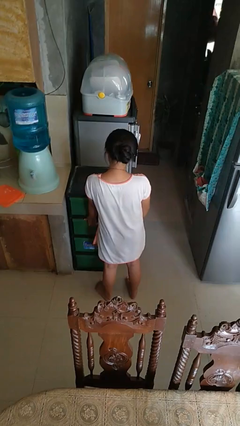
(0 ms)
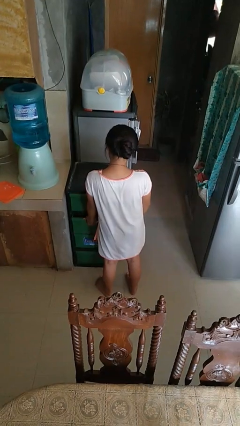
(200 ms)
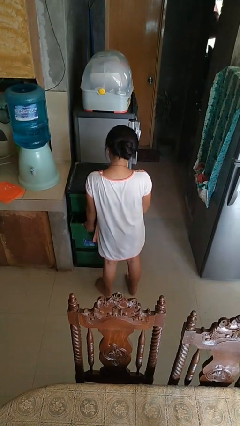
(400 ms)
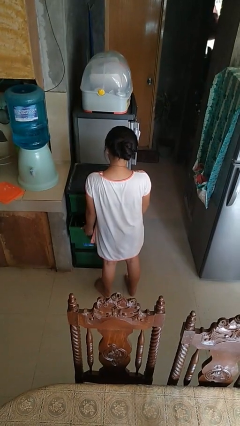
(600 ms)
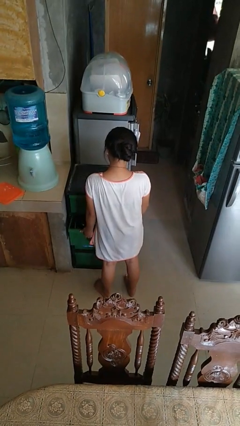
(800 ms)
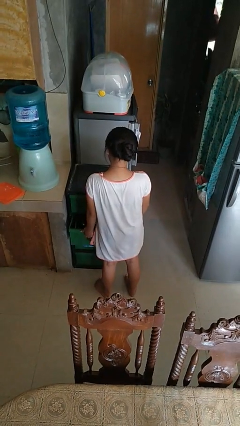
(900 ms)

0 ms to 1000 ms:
person opens kitchen drawer

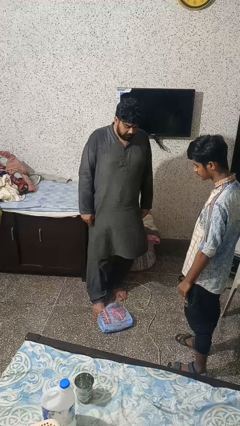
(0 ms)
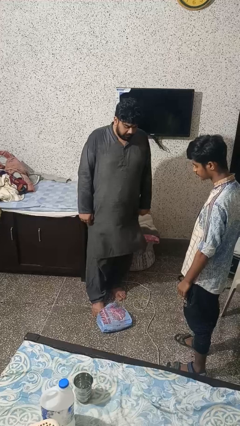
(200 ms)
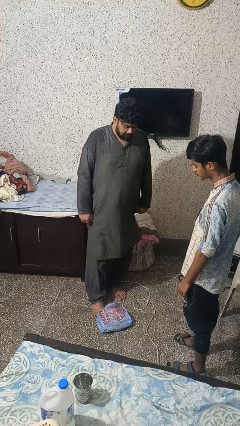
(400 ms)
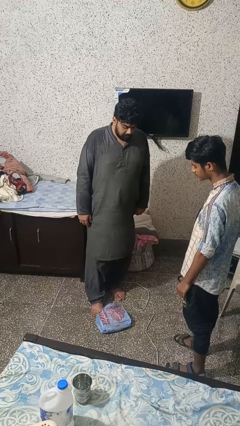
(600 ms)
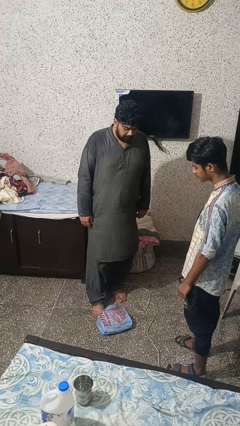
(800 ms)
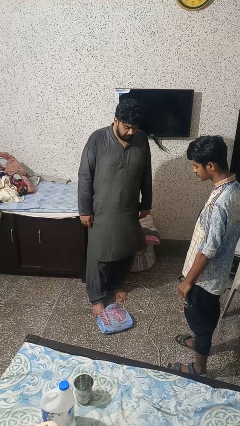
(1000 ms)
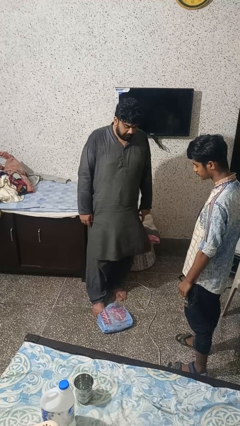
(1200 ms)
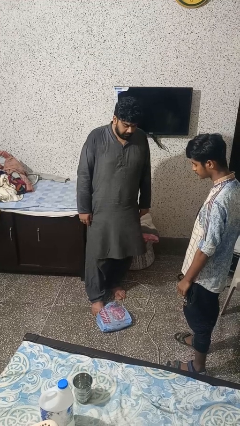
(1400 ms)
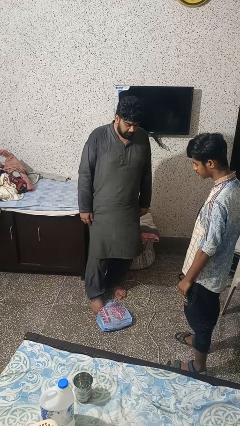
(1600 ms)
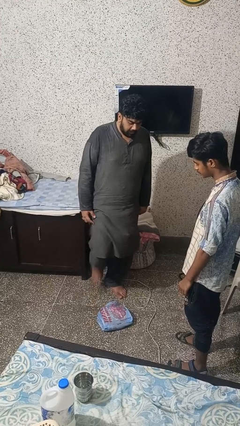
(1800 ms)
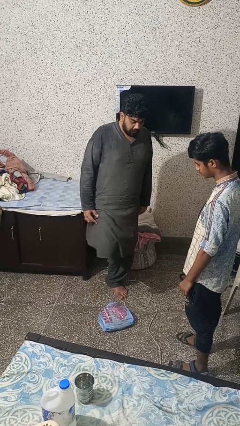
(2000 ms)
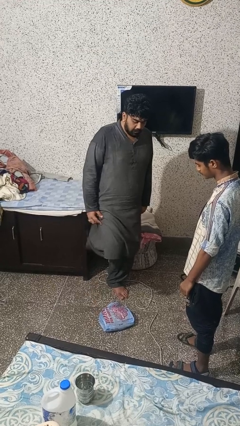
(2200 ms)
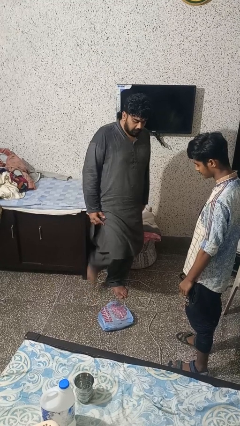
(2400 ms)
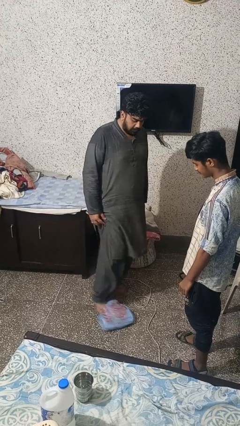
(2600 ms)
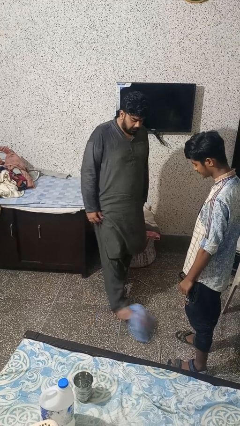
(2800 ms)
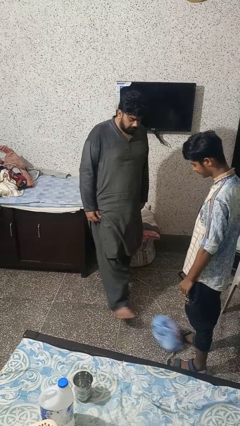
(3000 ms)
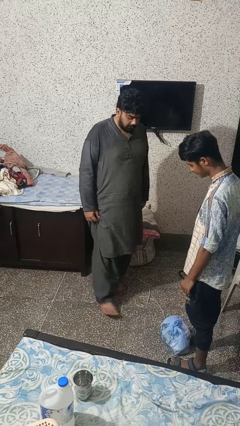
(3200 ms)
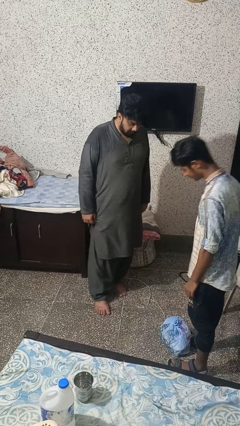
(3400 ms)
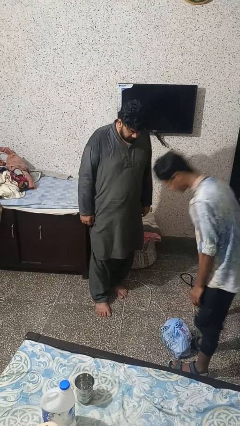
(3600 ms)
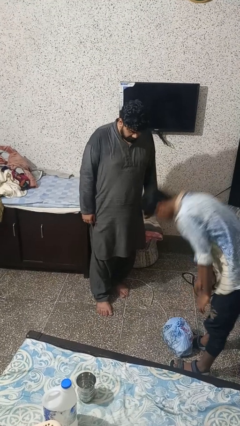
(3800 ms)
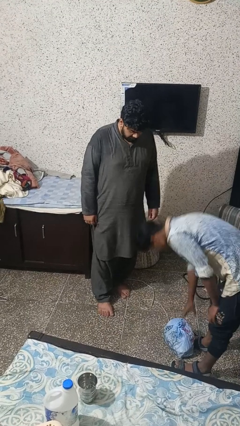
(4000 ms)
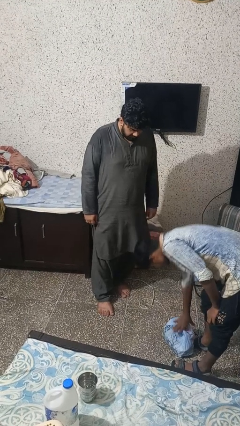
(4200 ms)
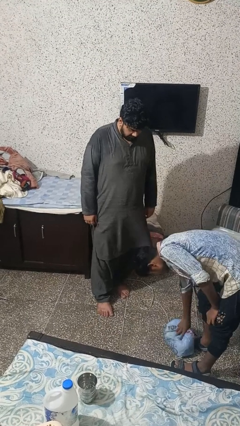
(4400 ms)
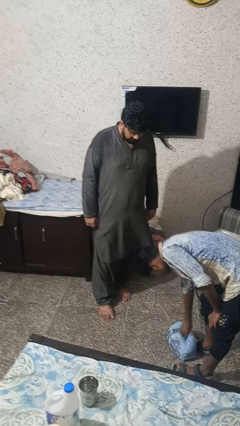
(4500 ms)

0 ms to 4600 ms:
person kicks object to person

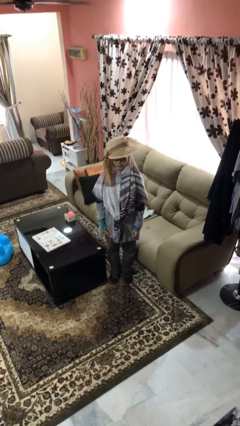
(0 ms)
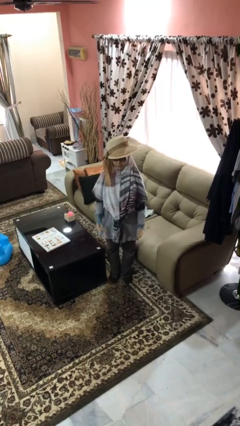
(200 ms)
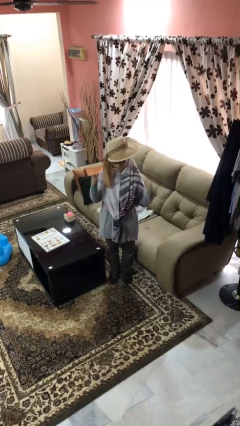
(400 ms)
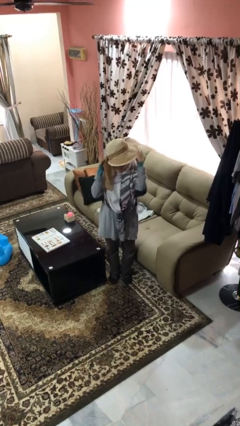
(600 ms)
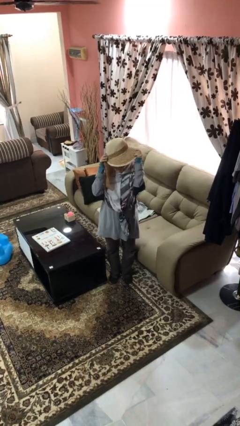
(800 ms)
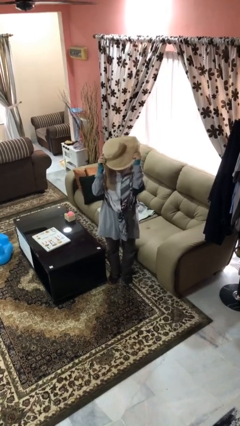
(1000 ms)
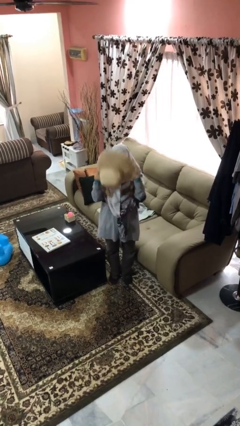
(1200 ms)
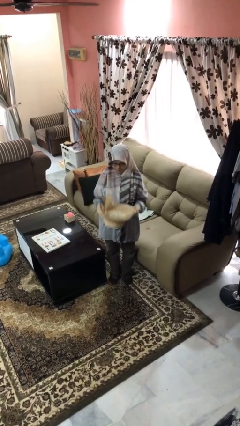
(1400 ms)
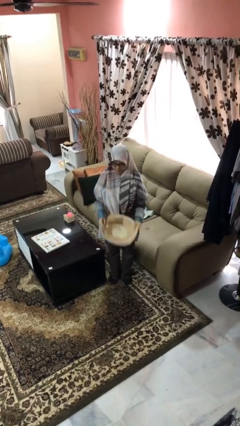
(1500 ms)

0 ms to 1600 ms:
person takes off hat

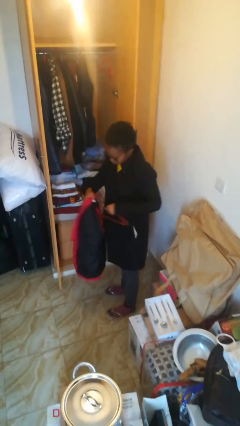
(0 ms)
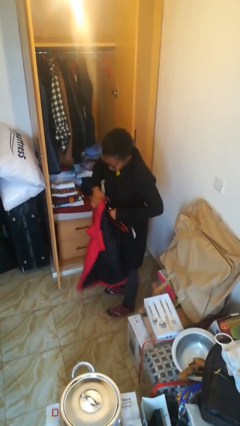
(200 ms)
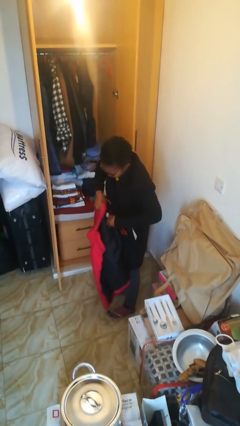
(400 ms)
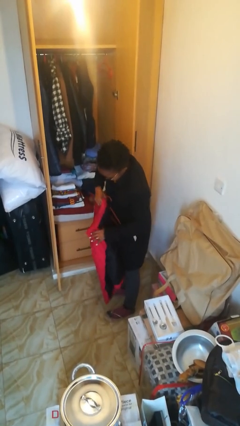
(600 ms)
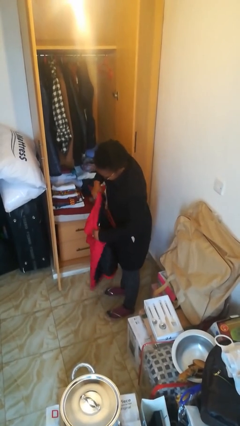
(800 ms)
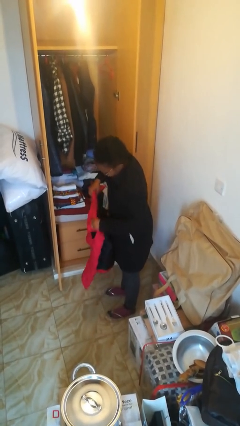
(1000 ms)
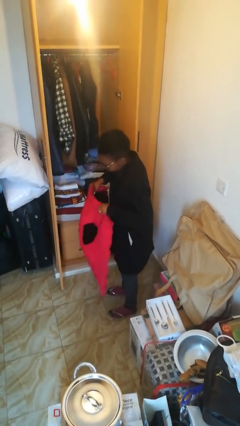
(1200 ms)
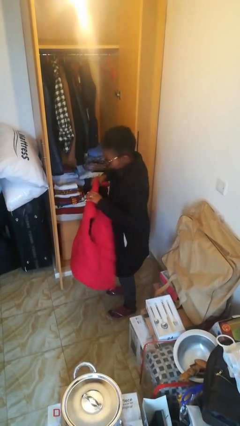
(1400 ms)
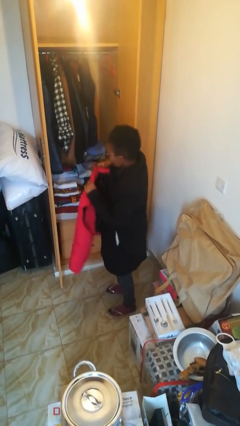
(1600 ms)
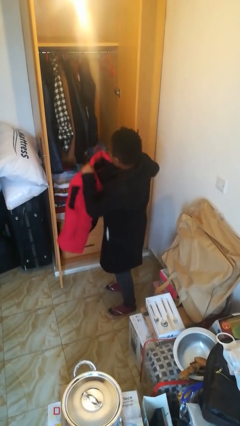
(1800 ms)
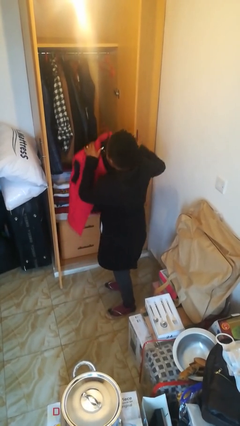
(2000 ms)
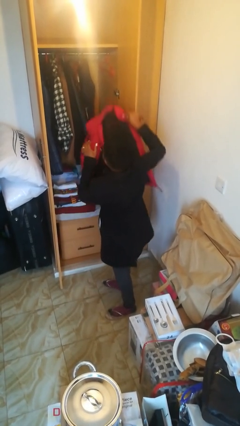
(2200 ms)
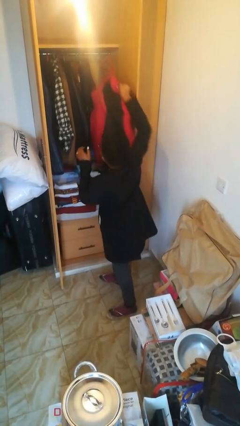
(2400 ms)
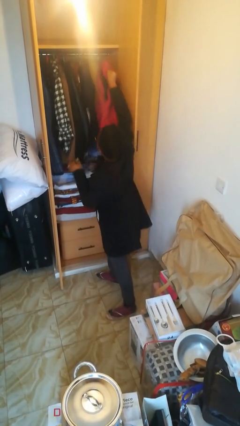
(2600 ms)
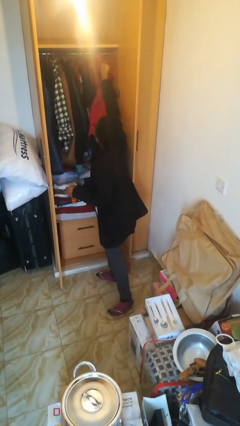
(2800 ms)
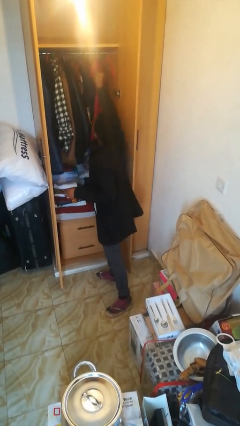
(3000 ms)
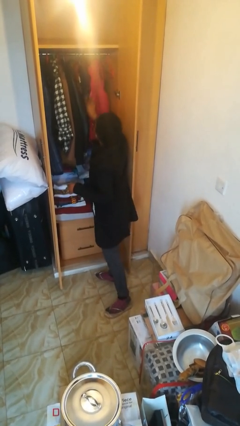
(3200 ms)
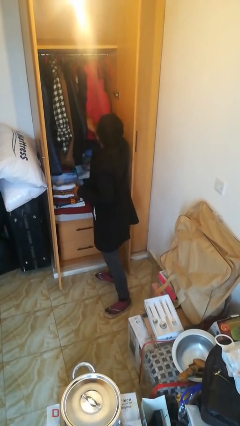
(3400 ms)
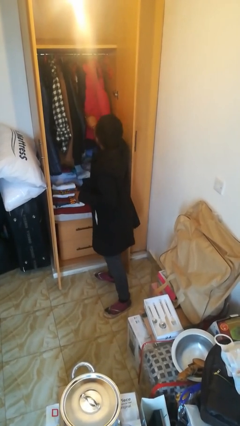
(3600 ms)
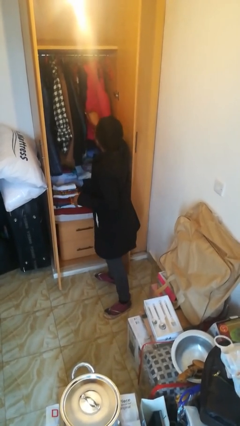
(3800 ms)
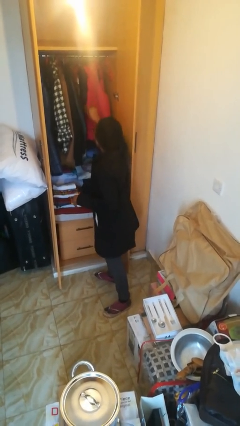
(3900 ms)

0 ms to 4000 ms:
person puts clothes into closet

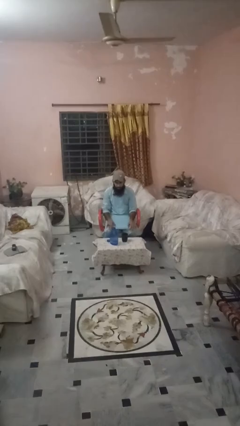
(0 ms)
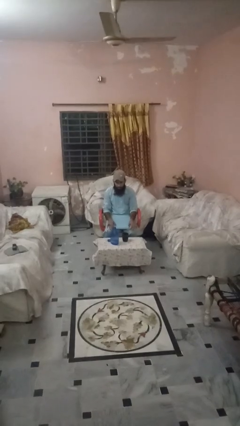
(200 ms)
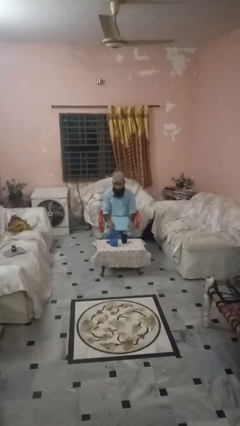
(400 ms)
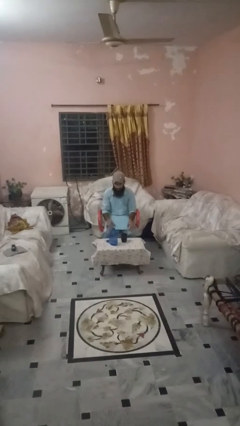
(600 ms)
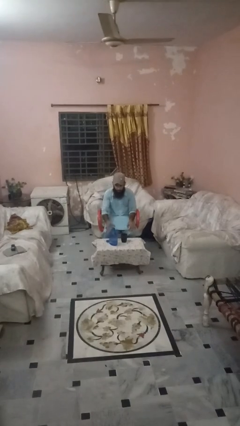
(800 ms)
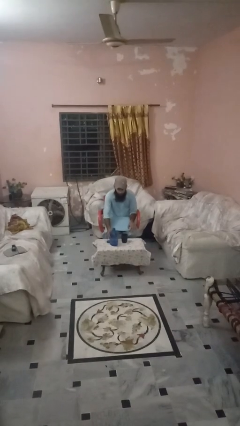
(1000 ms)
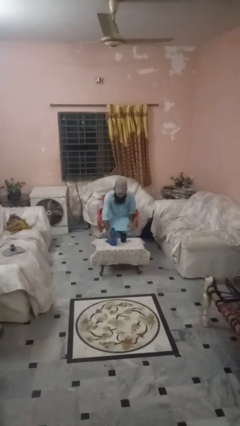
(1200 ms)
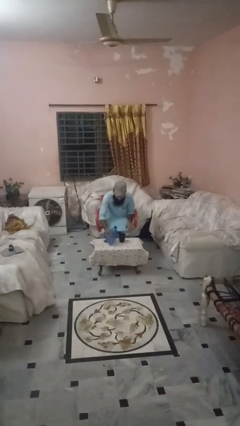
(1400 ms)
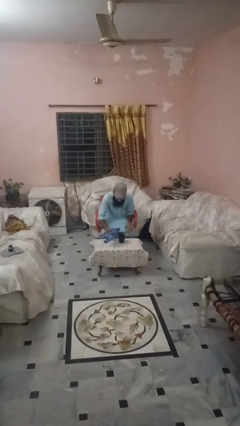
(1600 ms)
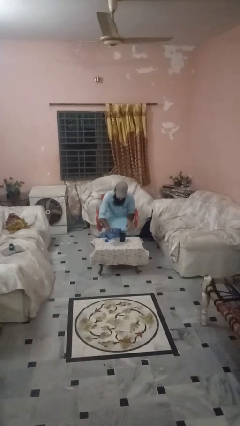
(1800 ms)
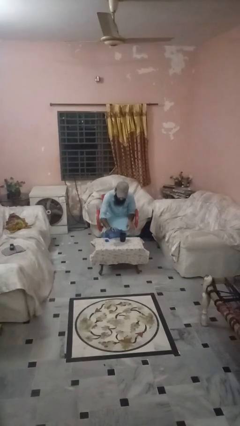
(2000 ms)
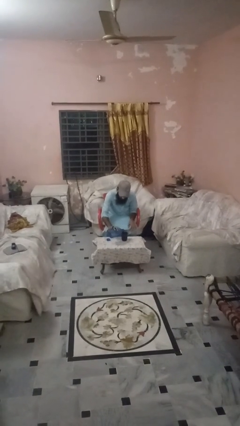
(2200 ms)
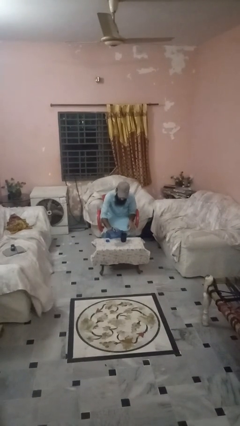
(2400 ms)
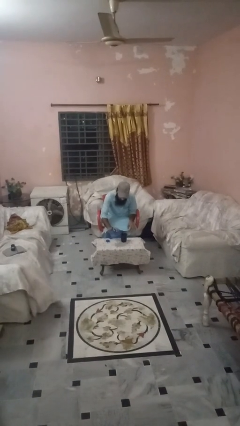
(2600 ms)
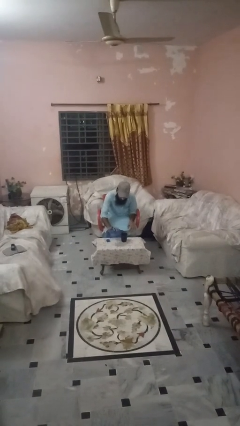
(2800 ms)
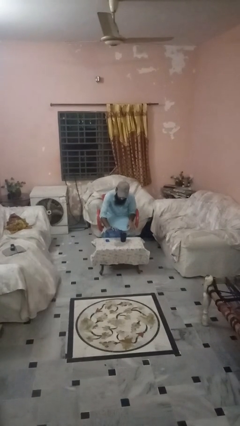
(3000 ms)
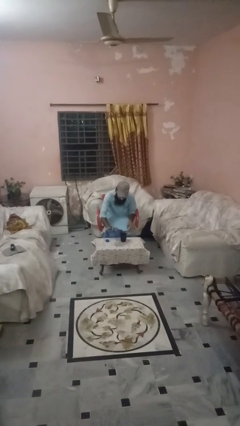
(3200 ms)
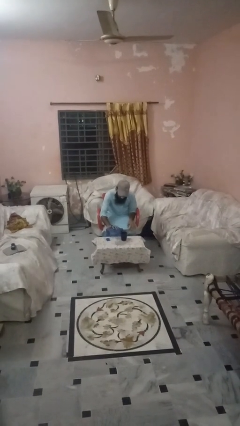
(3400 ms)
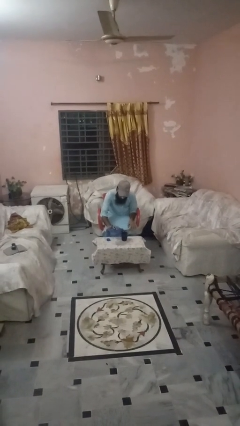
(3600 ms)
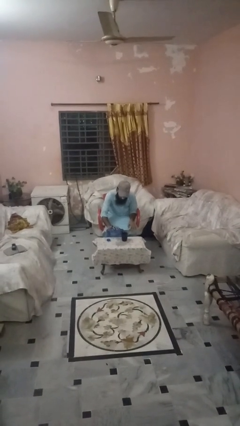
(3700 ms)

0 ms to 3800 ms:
person pours liquid into cup

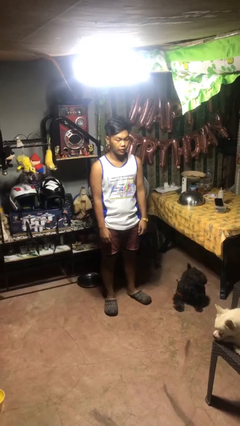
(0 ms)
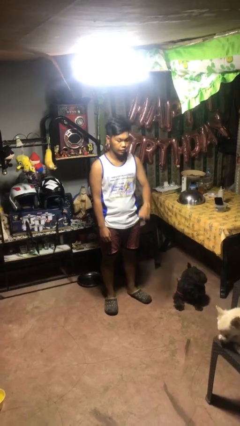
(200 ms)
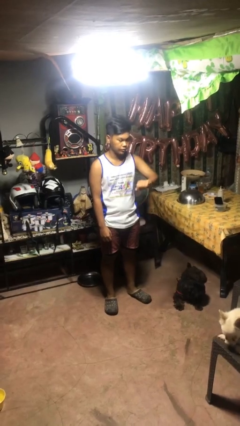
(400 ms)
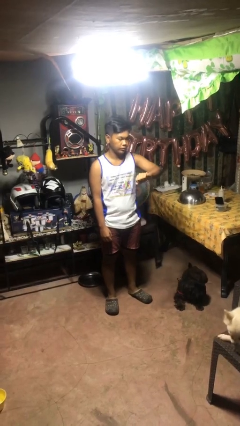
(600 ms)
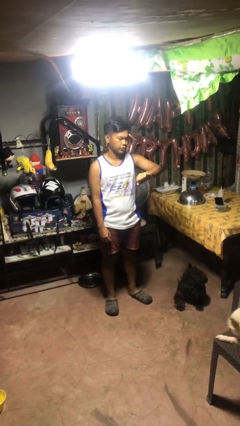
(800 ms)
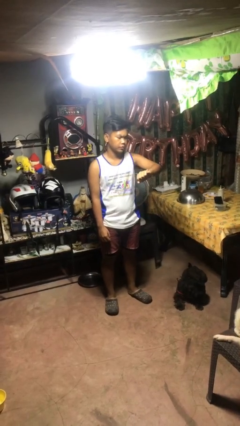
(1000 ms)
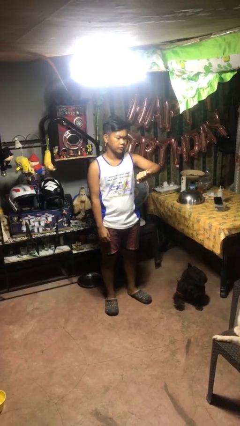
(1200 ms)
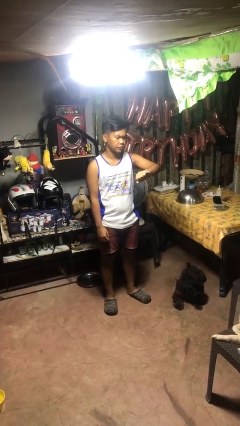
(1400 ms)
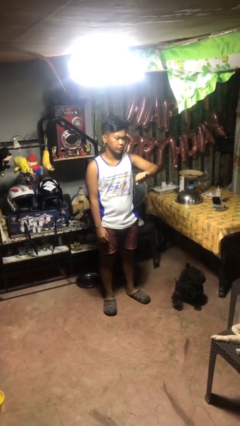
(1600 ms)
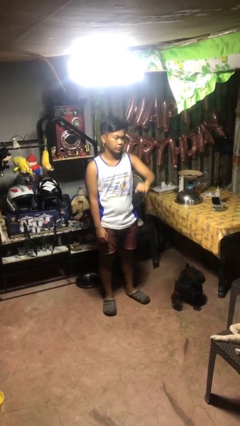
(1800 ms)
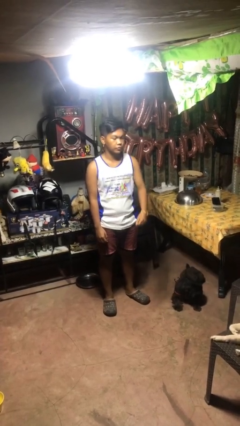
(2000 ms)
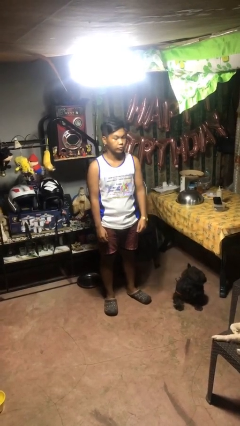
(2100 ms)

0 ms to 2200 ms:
person looks at wristwatch

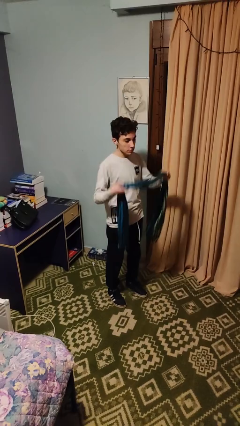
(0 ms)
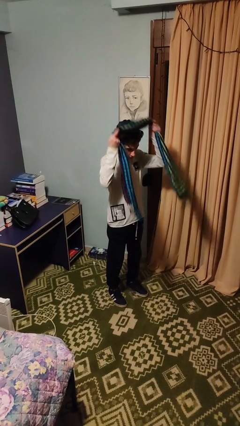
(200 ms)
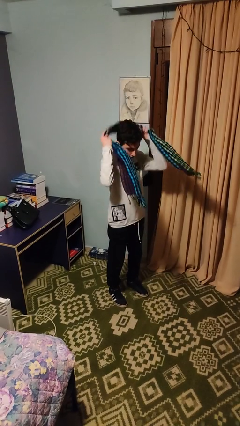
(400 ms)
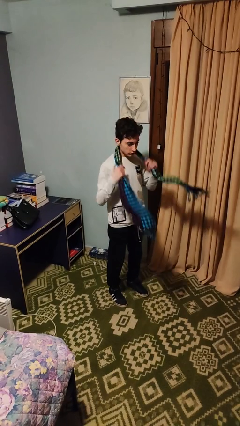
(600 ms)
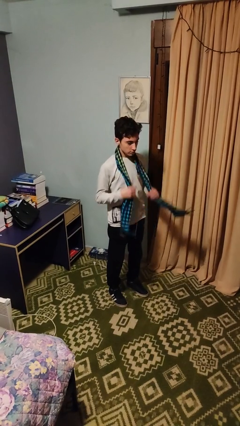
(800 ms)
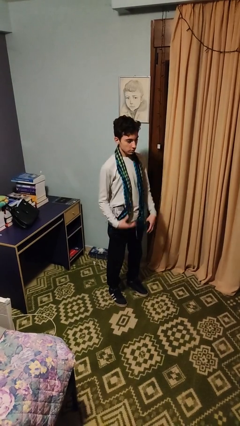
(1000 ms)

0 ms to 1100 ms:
person puts on scarf
